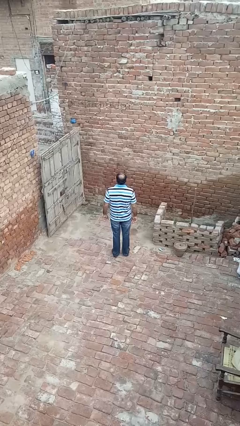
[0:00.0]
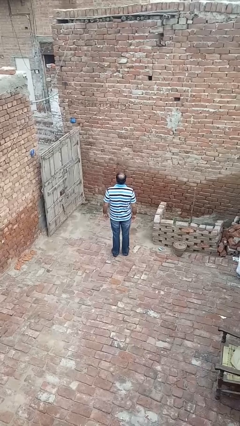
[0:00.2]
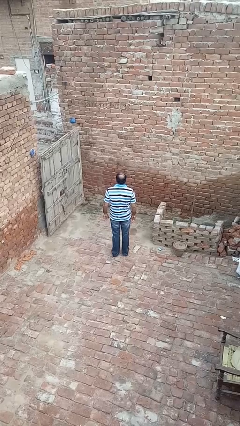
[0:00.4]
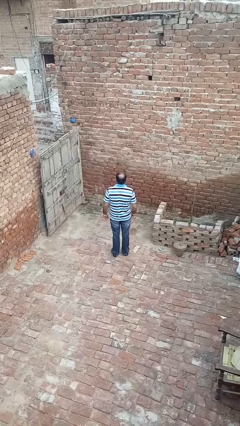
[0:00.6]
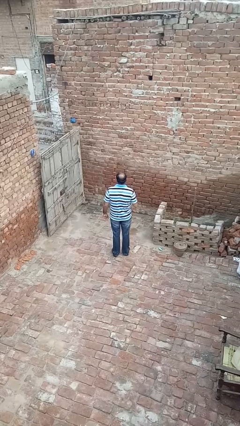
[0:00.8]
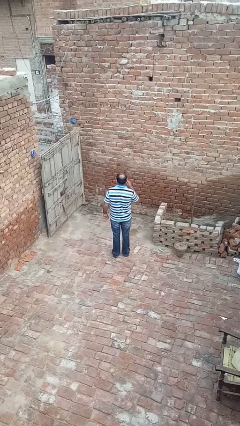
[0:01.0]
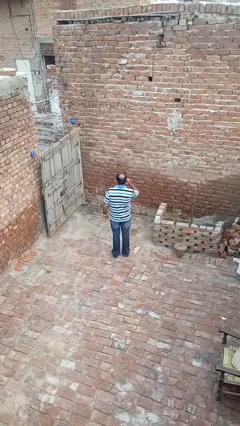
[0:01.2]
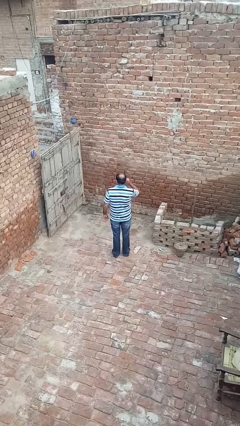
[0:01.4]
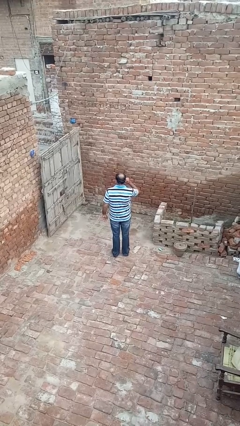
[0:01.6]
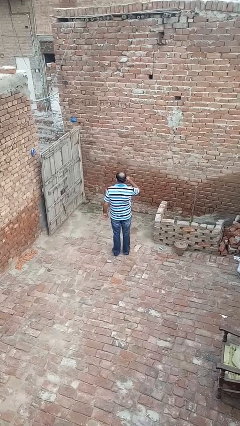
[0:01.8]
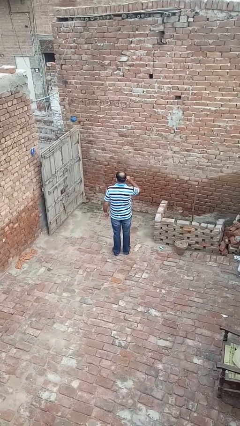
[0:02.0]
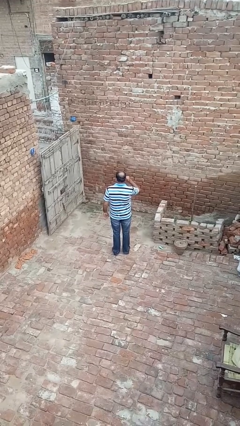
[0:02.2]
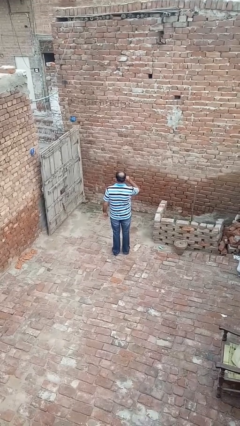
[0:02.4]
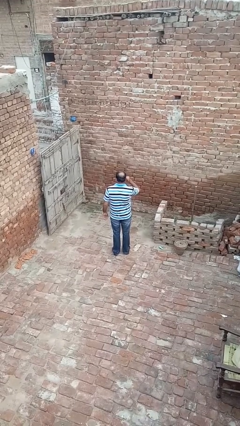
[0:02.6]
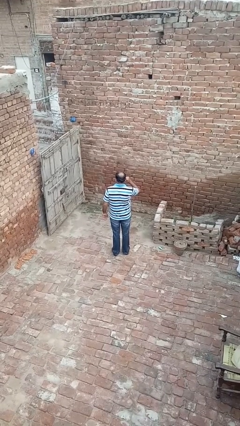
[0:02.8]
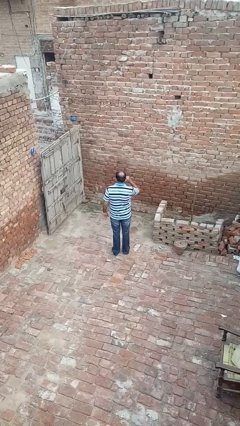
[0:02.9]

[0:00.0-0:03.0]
person touches earlobe

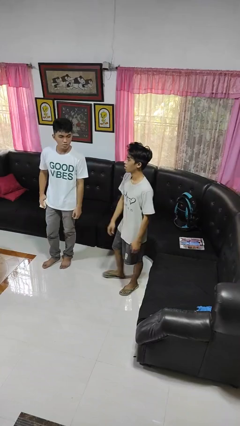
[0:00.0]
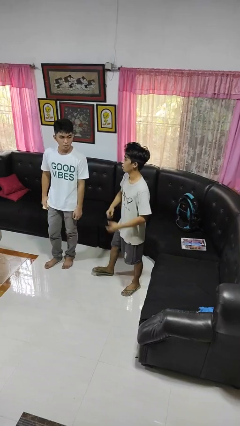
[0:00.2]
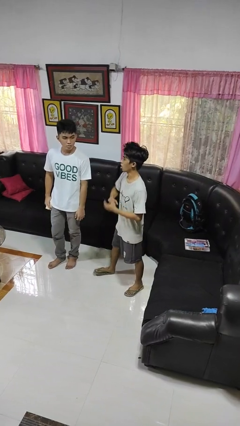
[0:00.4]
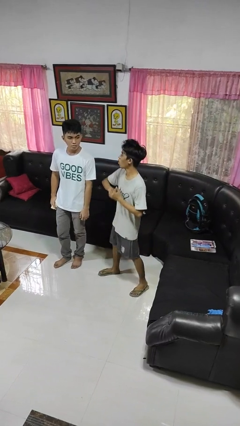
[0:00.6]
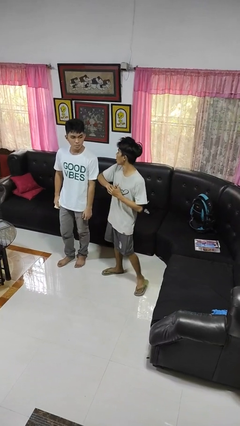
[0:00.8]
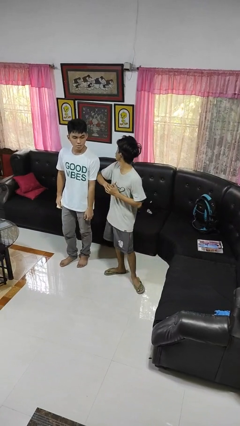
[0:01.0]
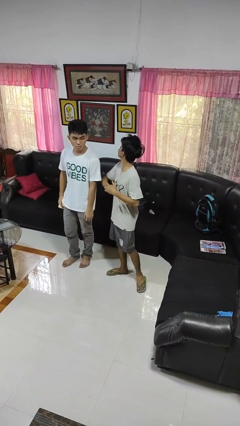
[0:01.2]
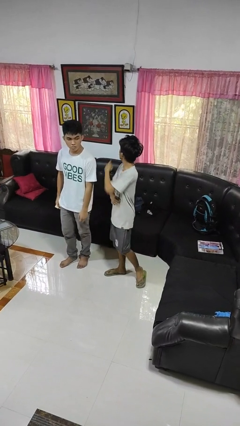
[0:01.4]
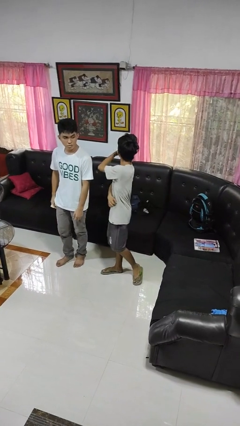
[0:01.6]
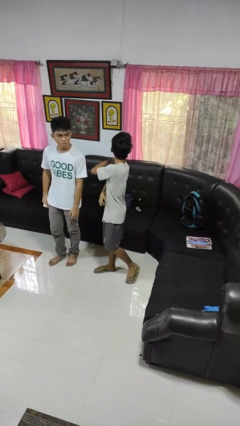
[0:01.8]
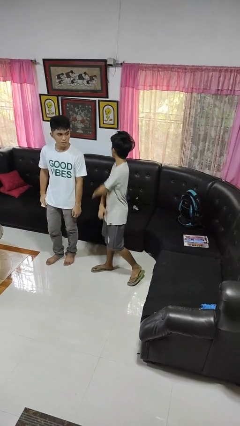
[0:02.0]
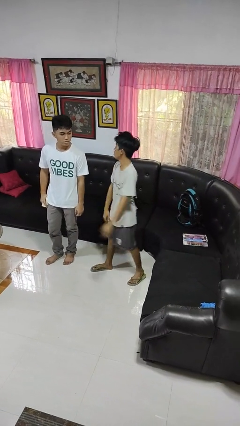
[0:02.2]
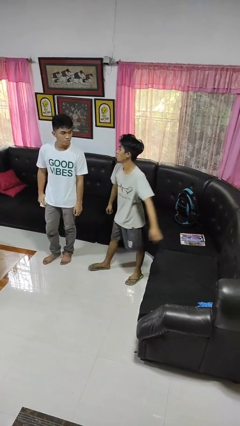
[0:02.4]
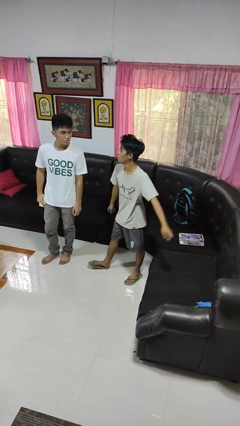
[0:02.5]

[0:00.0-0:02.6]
person nudges person with elbow

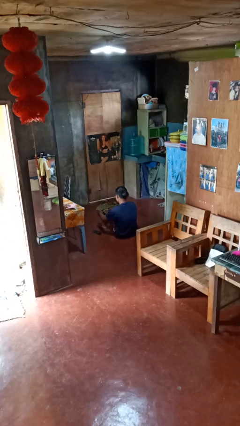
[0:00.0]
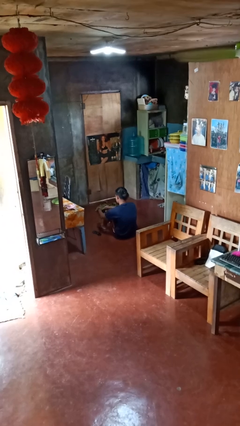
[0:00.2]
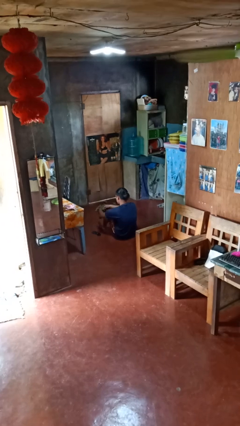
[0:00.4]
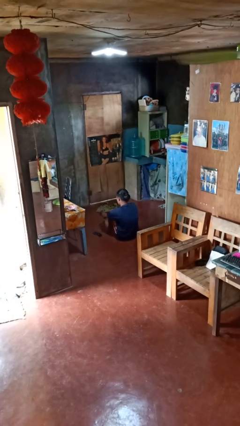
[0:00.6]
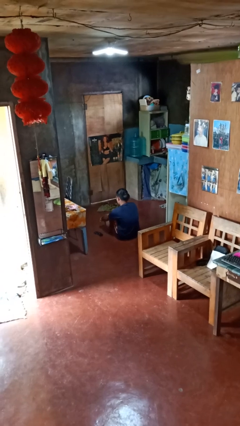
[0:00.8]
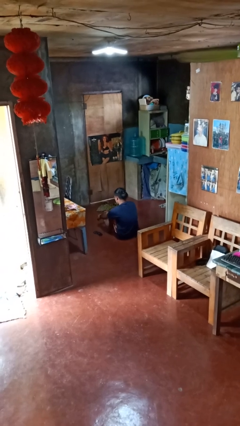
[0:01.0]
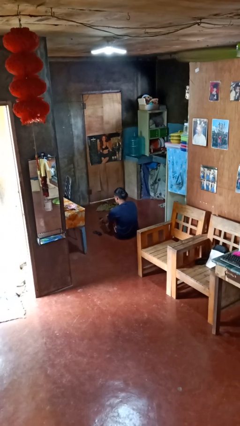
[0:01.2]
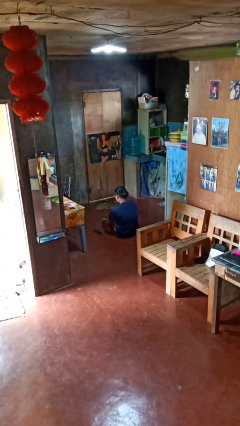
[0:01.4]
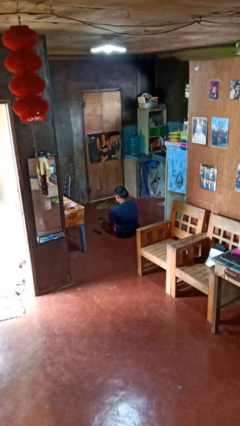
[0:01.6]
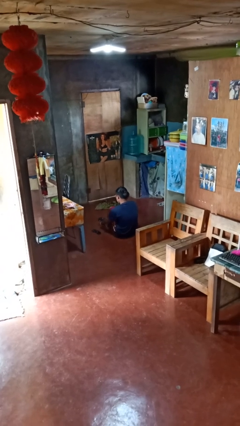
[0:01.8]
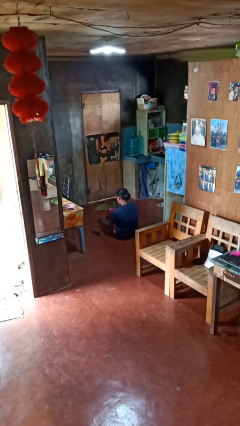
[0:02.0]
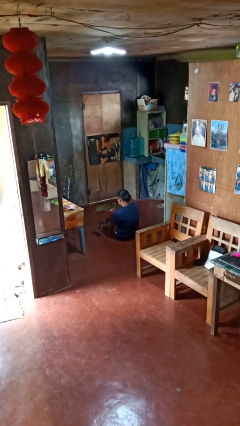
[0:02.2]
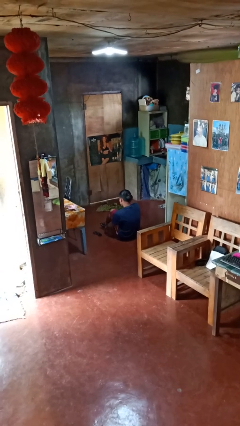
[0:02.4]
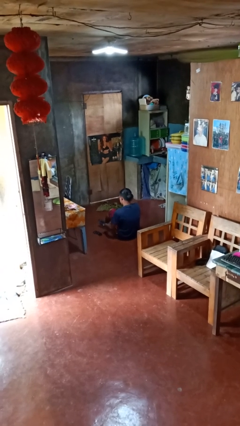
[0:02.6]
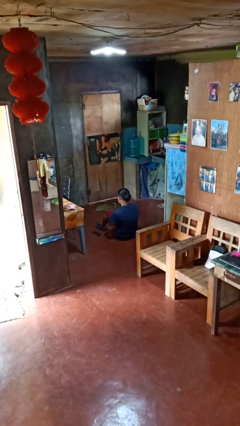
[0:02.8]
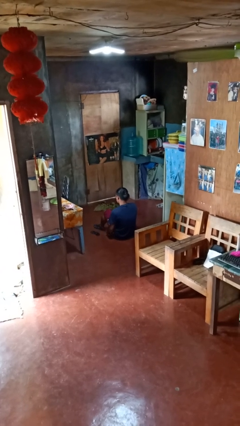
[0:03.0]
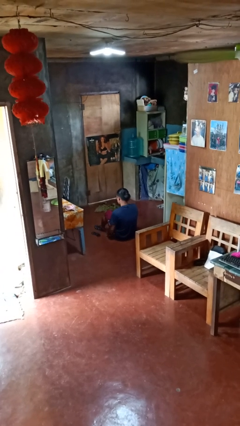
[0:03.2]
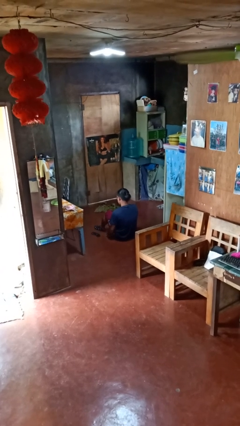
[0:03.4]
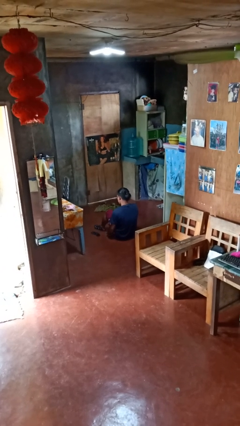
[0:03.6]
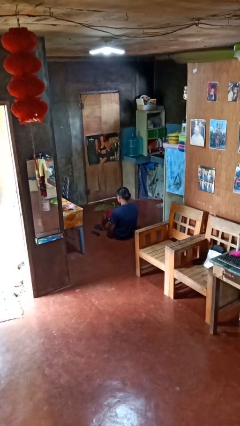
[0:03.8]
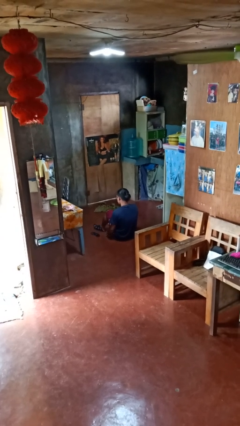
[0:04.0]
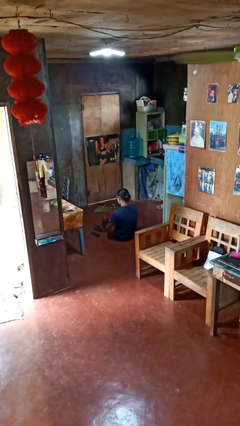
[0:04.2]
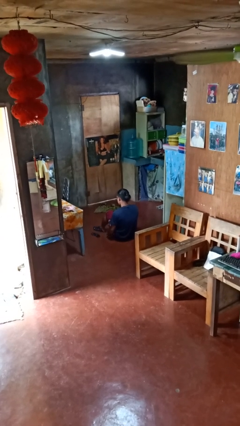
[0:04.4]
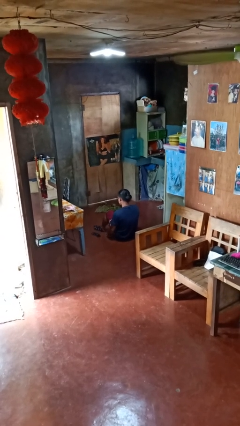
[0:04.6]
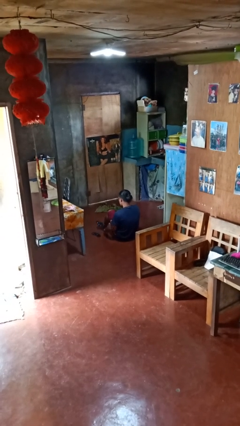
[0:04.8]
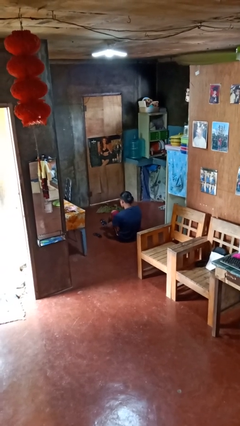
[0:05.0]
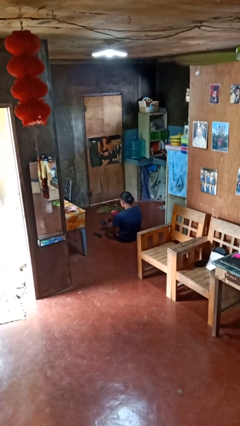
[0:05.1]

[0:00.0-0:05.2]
person puts on socks

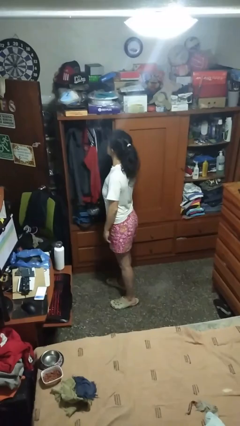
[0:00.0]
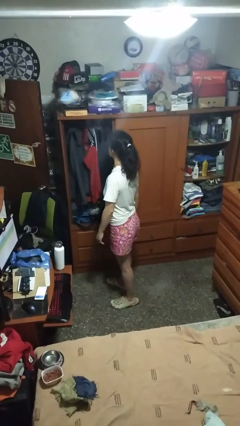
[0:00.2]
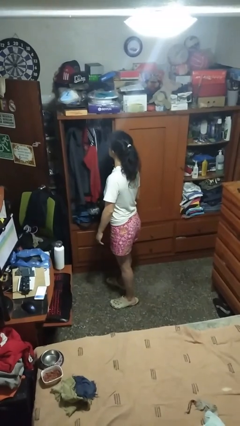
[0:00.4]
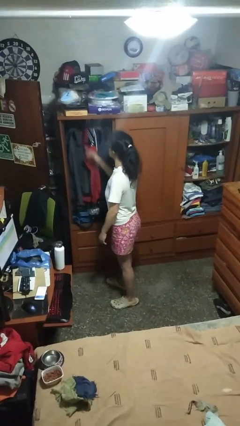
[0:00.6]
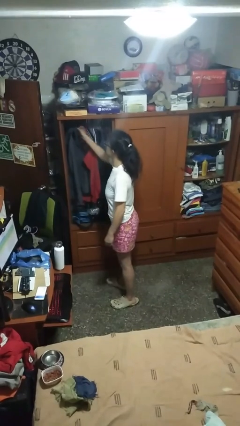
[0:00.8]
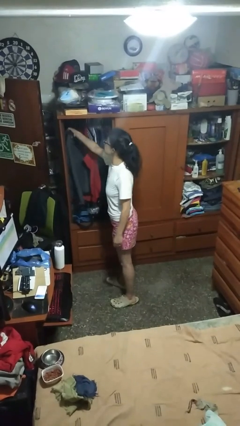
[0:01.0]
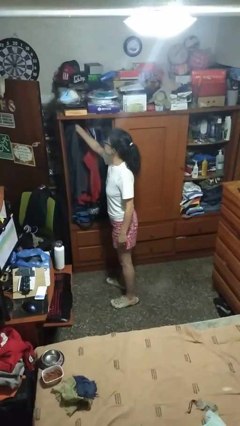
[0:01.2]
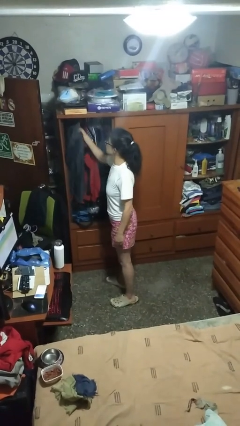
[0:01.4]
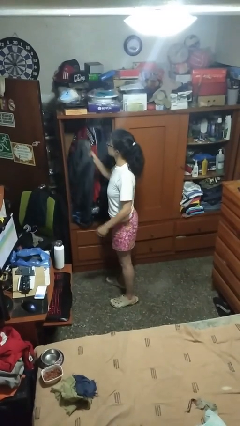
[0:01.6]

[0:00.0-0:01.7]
person takes clothes from closet

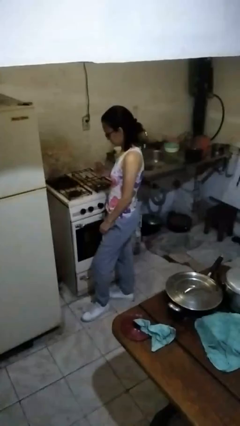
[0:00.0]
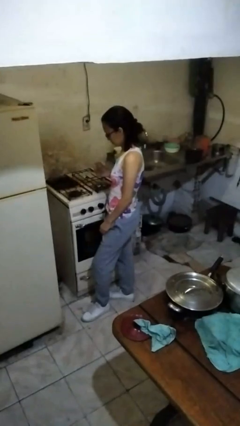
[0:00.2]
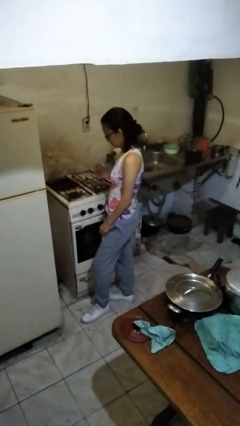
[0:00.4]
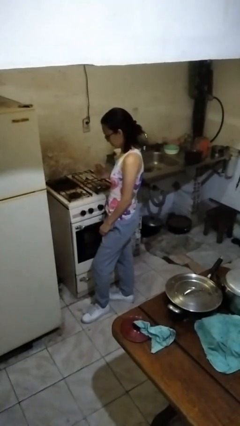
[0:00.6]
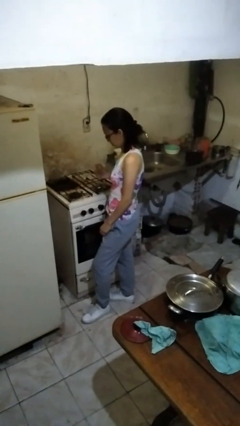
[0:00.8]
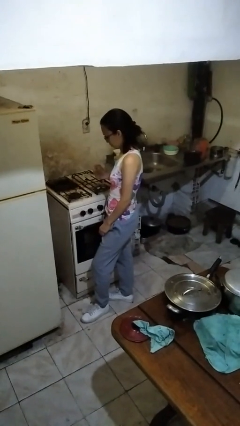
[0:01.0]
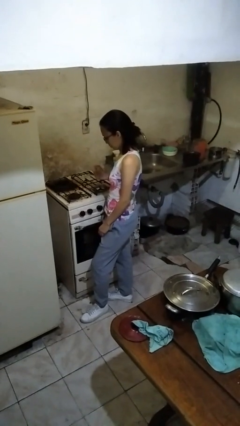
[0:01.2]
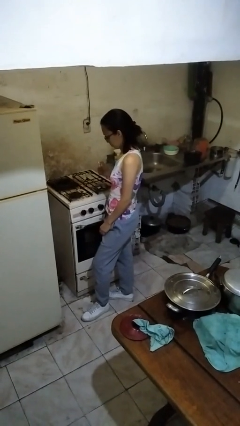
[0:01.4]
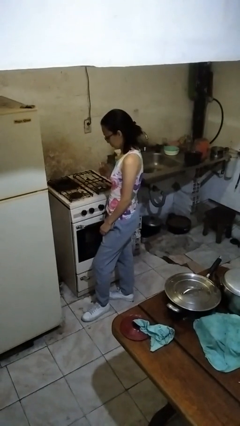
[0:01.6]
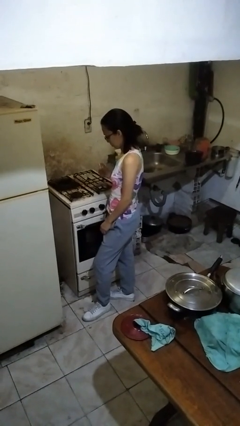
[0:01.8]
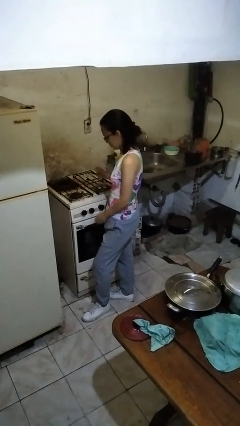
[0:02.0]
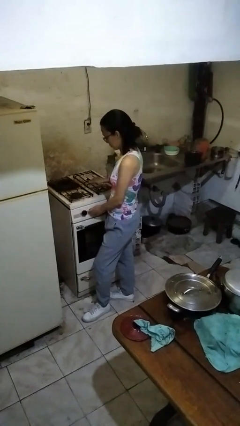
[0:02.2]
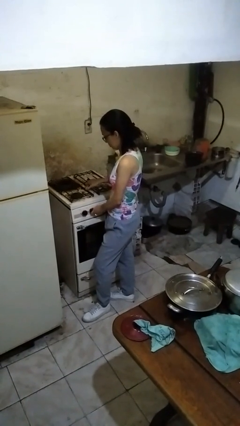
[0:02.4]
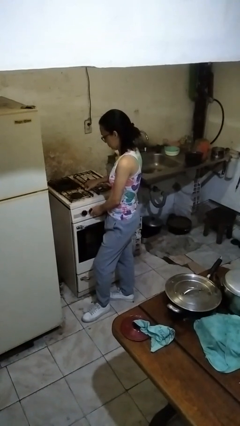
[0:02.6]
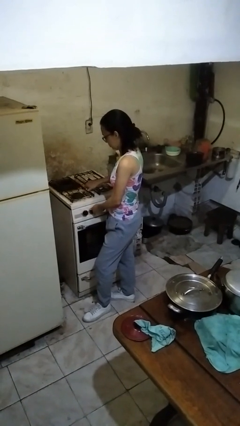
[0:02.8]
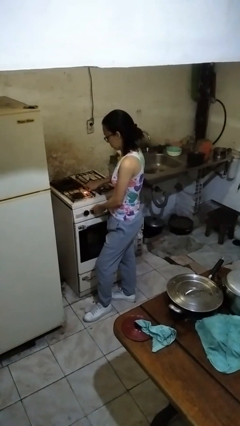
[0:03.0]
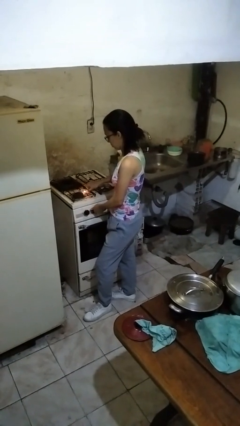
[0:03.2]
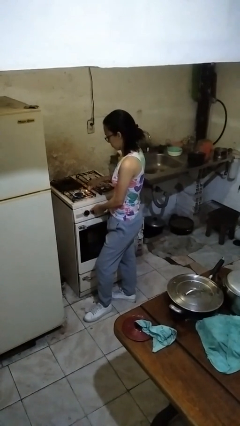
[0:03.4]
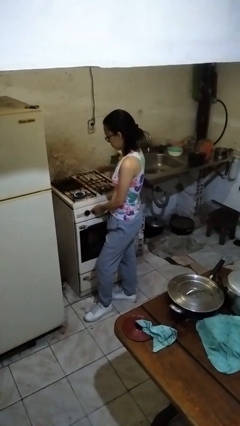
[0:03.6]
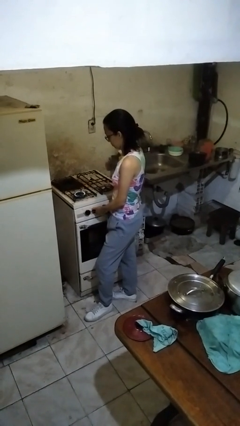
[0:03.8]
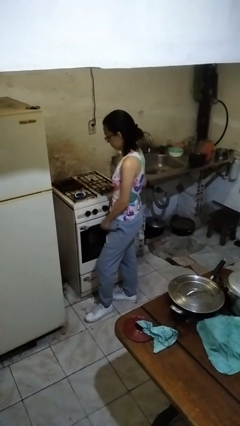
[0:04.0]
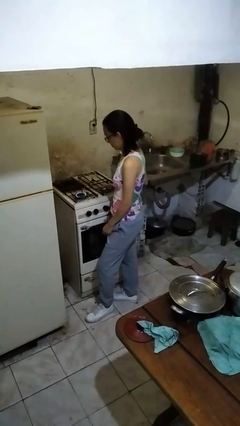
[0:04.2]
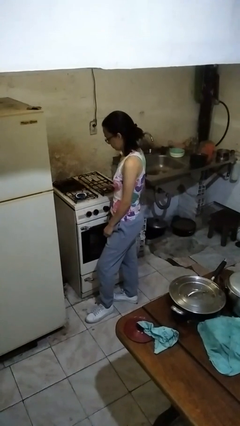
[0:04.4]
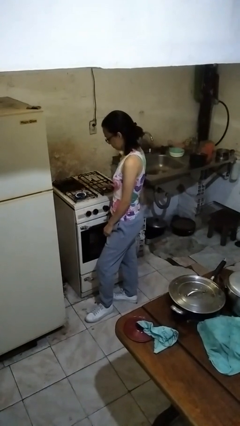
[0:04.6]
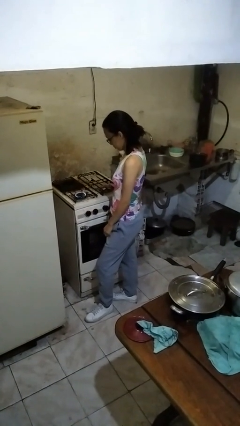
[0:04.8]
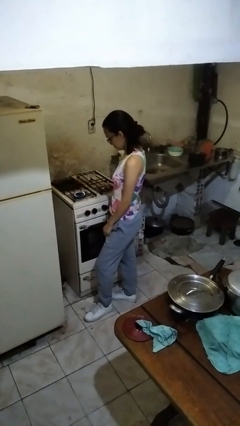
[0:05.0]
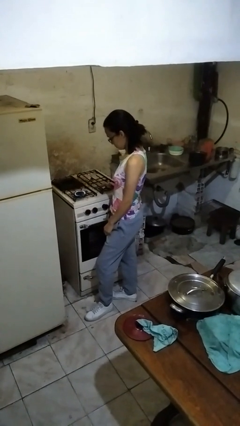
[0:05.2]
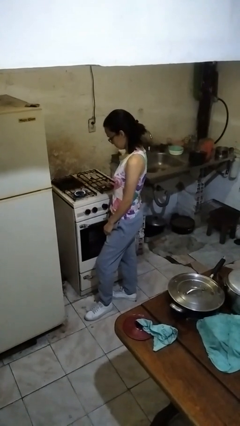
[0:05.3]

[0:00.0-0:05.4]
person turns on stovetop
